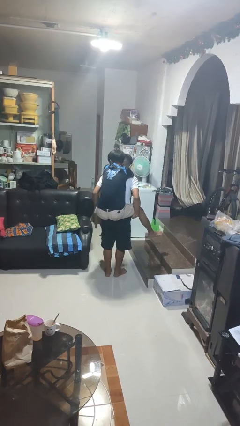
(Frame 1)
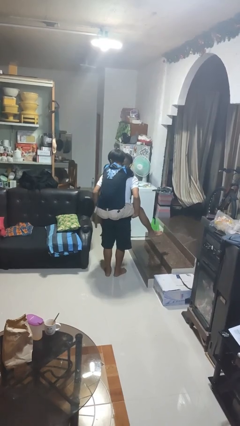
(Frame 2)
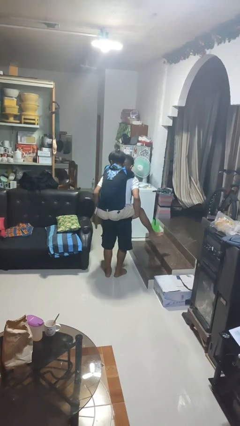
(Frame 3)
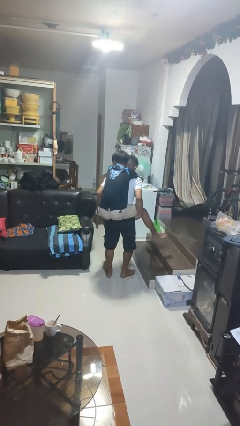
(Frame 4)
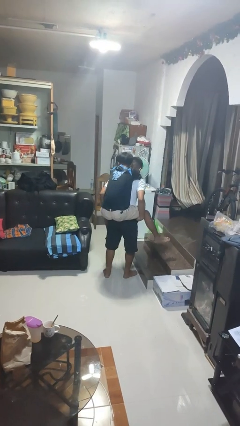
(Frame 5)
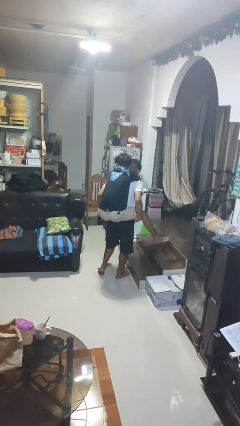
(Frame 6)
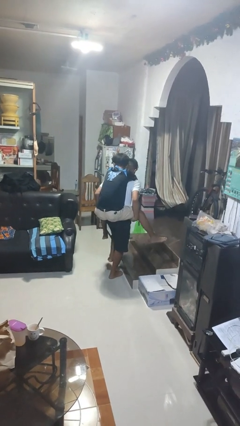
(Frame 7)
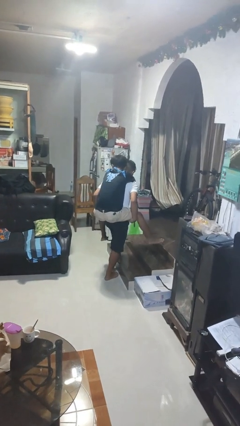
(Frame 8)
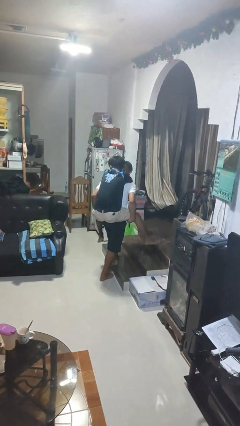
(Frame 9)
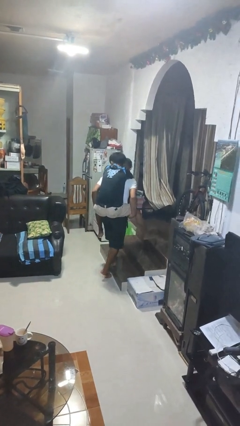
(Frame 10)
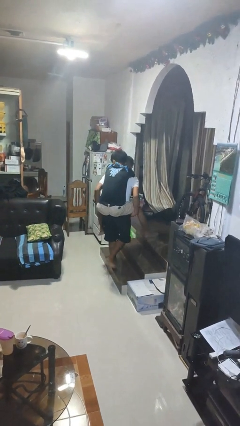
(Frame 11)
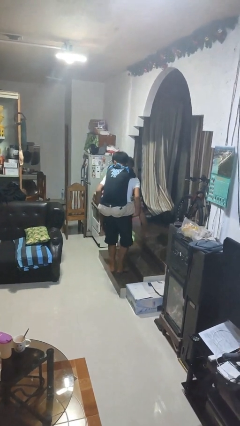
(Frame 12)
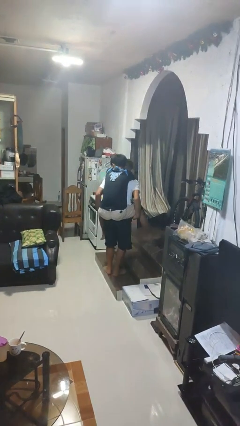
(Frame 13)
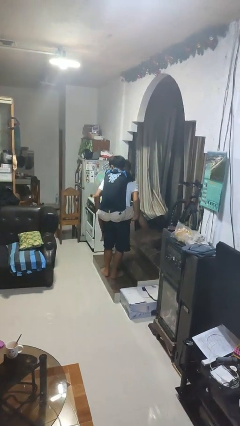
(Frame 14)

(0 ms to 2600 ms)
person carries person on back

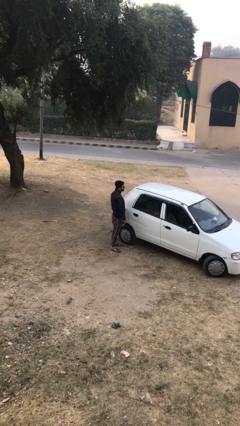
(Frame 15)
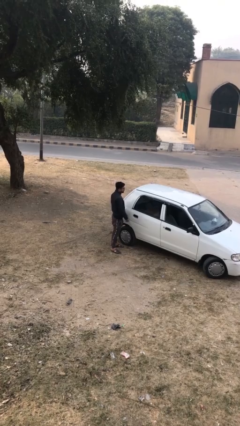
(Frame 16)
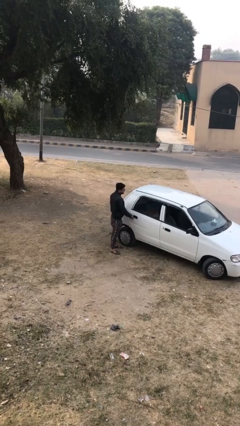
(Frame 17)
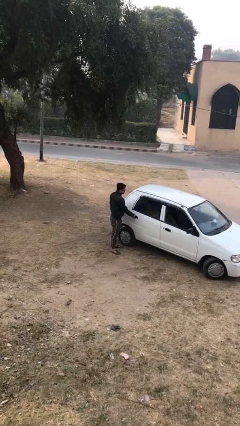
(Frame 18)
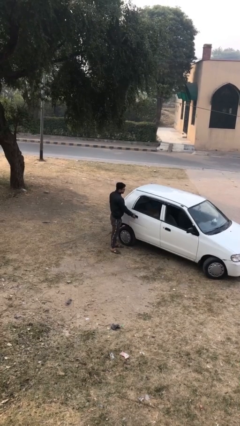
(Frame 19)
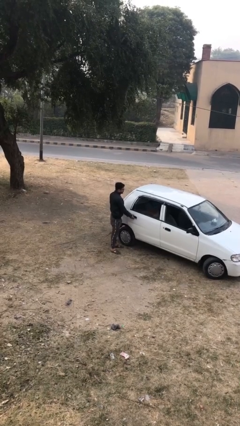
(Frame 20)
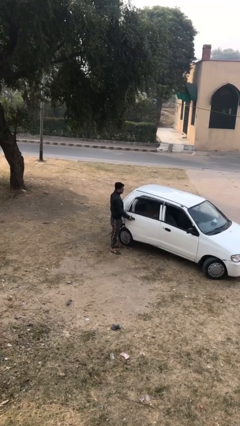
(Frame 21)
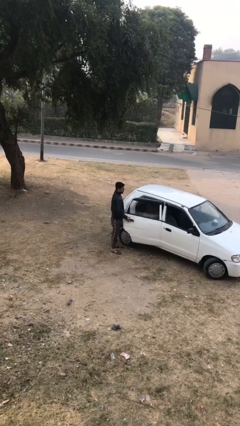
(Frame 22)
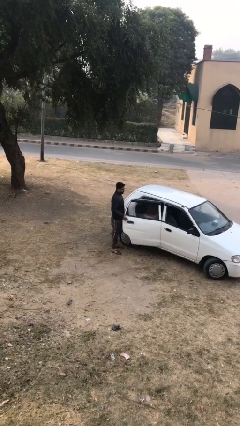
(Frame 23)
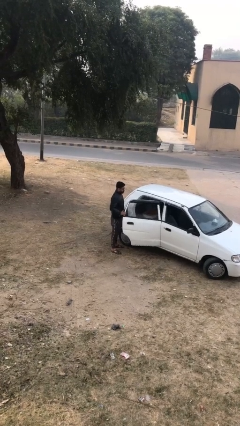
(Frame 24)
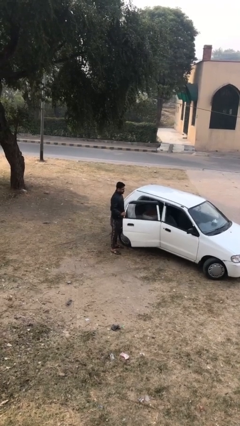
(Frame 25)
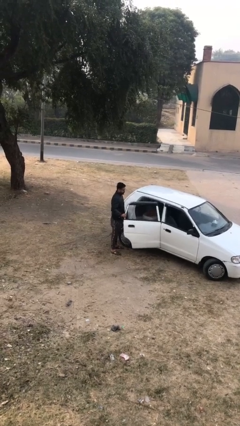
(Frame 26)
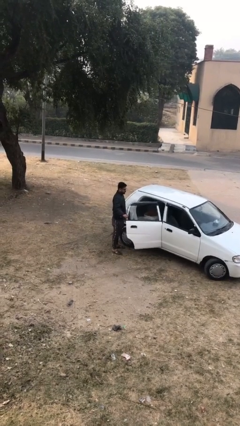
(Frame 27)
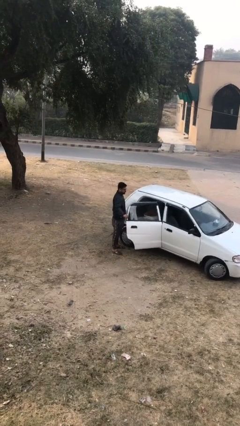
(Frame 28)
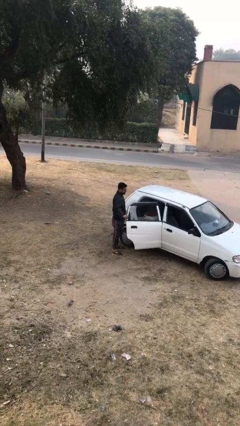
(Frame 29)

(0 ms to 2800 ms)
person opens car door

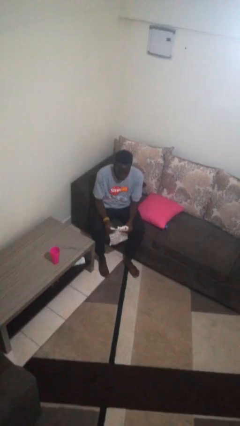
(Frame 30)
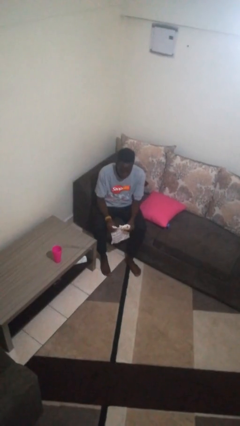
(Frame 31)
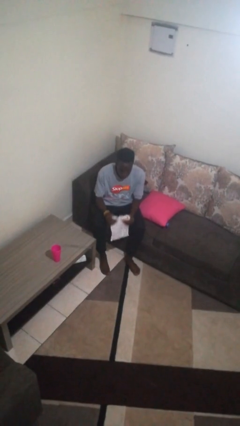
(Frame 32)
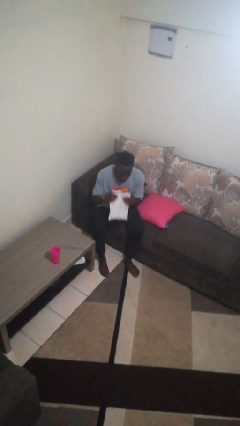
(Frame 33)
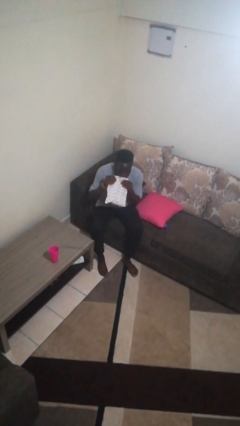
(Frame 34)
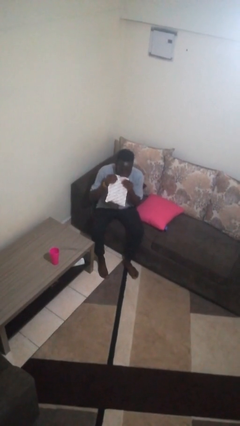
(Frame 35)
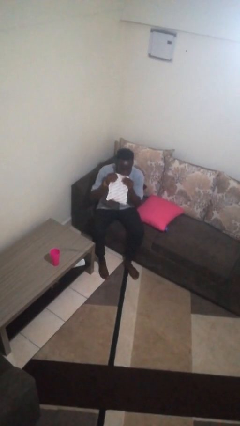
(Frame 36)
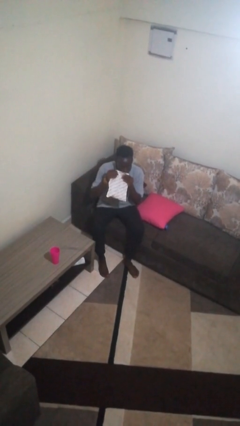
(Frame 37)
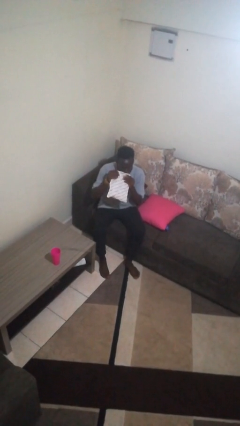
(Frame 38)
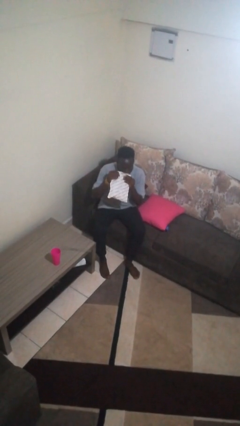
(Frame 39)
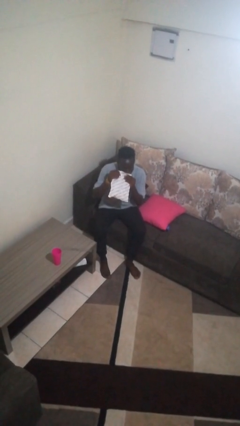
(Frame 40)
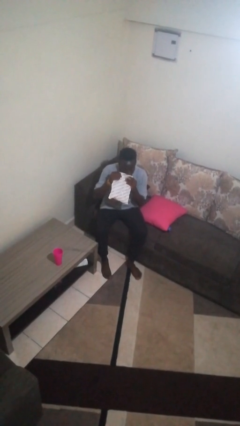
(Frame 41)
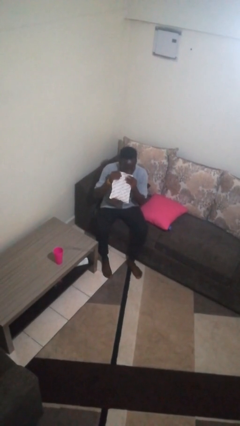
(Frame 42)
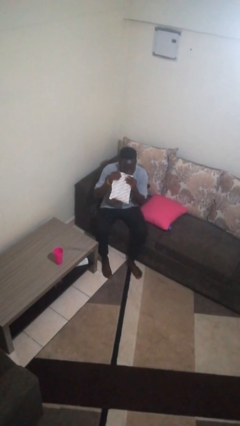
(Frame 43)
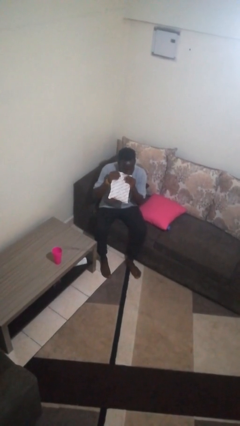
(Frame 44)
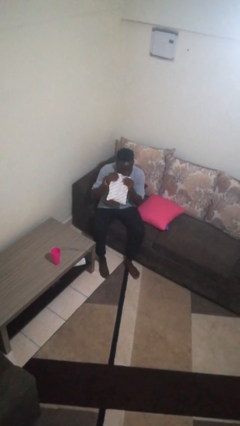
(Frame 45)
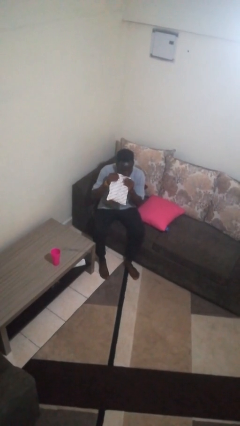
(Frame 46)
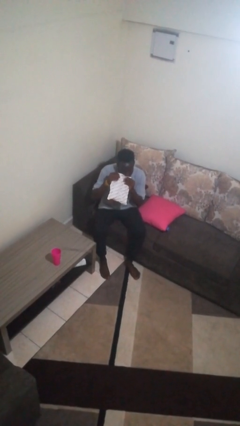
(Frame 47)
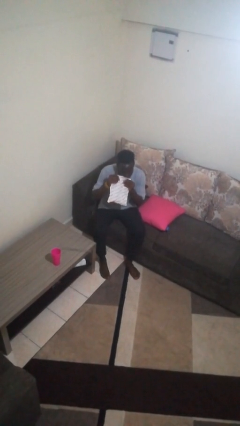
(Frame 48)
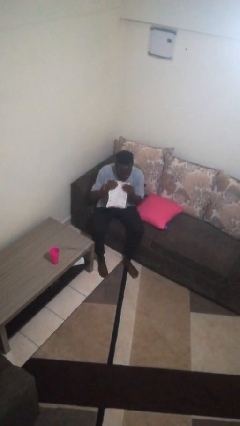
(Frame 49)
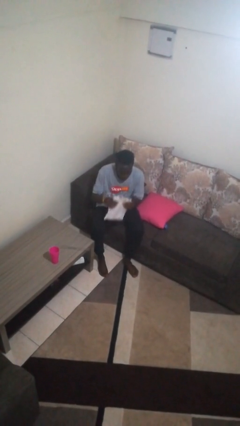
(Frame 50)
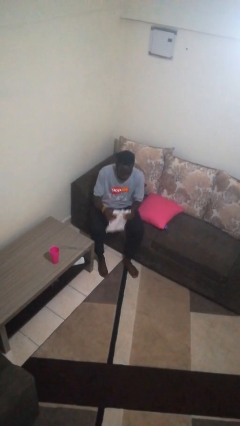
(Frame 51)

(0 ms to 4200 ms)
person eats snack from bag

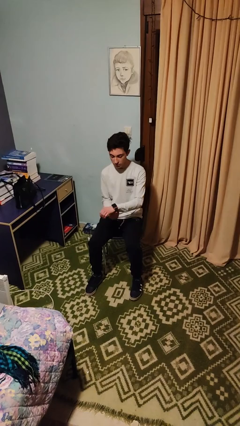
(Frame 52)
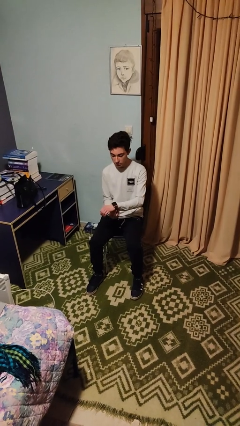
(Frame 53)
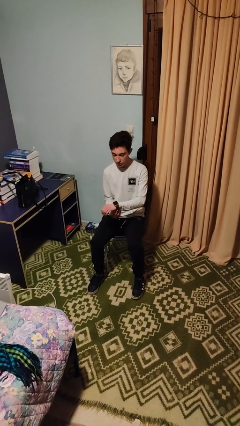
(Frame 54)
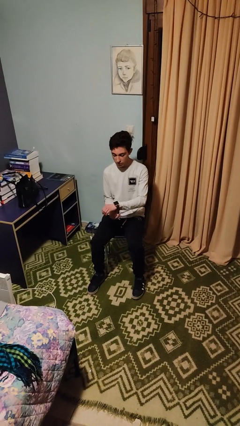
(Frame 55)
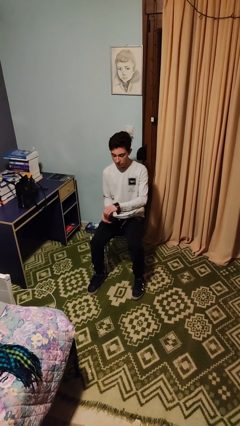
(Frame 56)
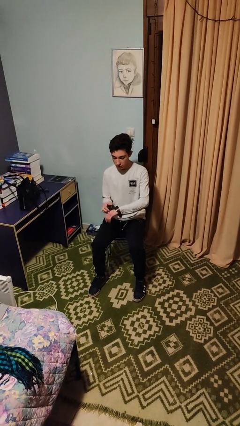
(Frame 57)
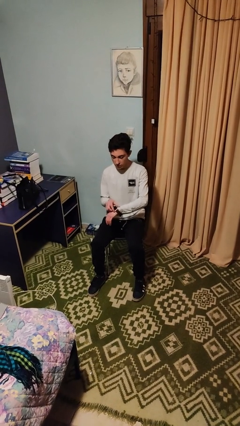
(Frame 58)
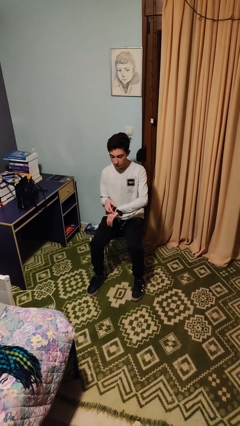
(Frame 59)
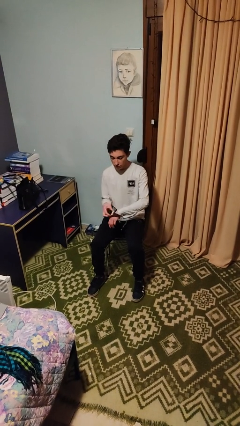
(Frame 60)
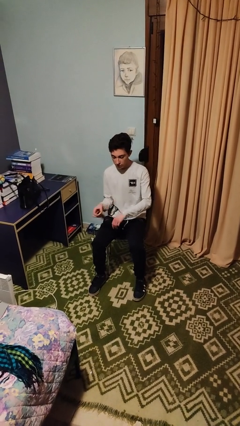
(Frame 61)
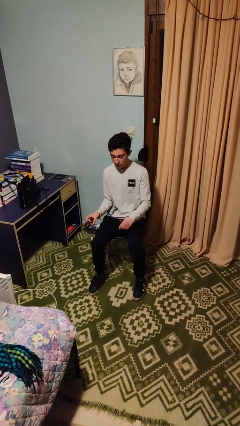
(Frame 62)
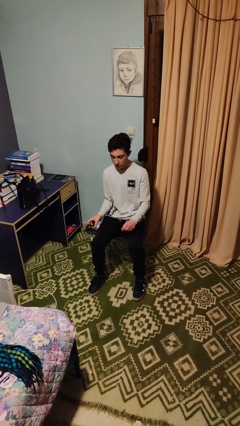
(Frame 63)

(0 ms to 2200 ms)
person takes off wristwatch

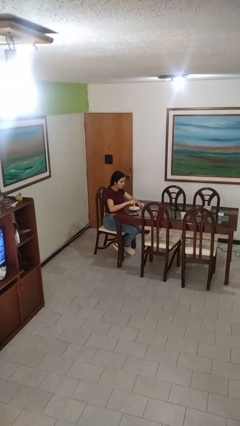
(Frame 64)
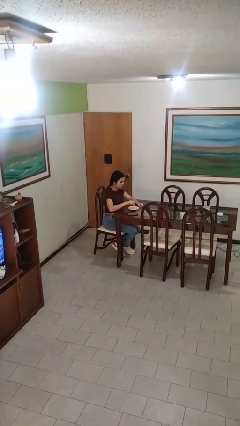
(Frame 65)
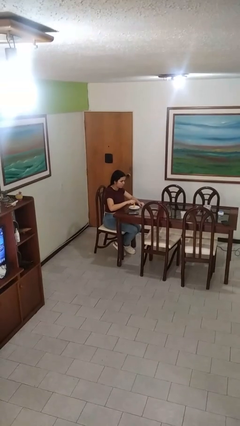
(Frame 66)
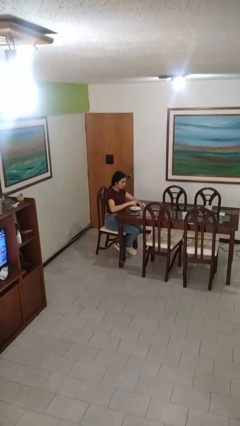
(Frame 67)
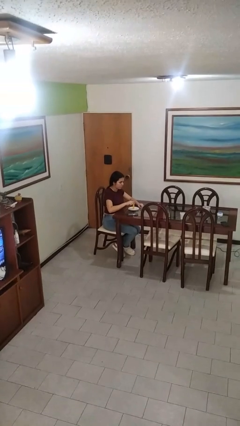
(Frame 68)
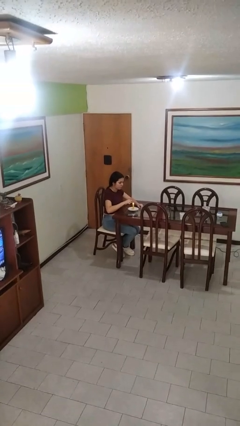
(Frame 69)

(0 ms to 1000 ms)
person lights candle

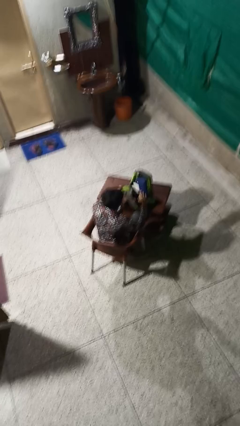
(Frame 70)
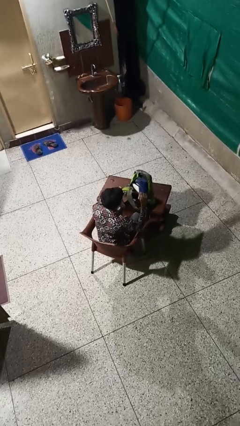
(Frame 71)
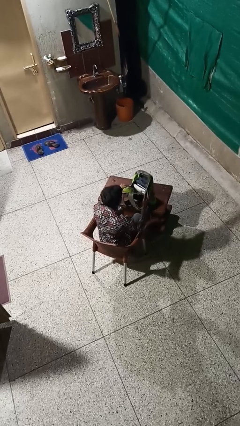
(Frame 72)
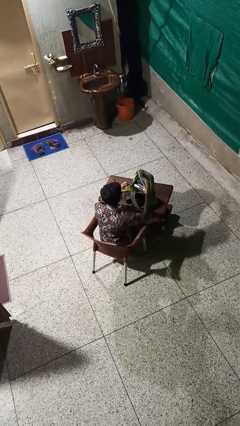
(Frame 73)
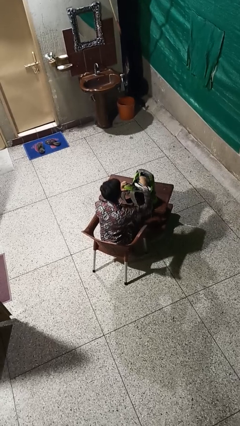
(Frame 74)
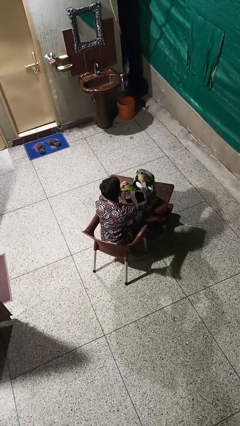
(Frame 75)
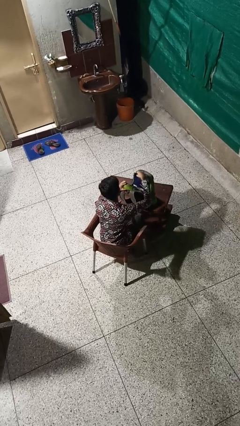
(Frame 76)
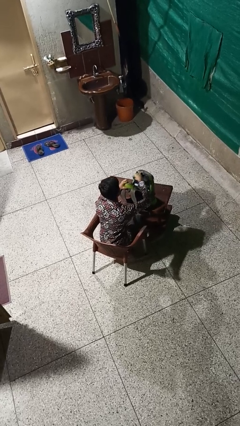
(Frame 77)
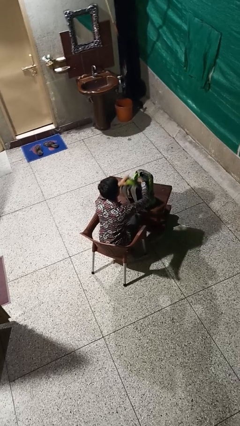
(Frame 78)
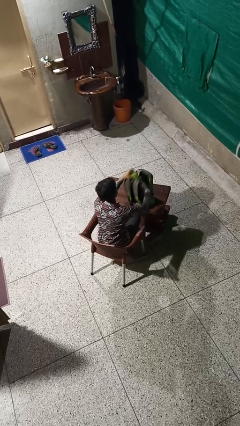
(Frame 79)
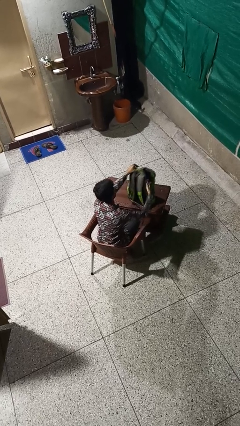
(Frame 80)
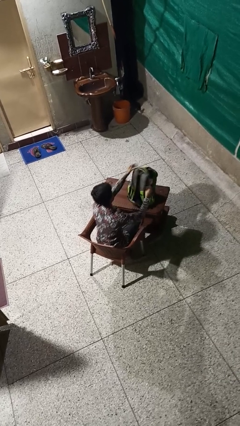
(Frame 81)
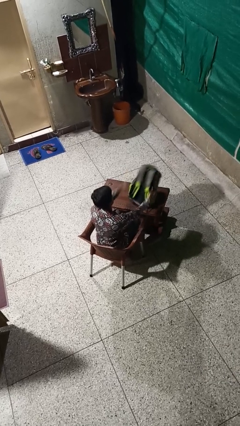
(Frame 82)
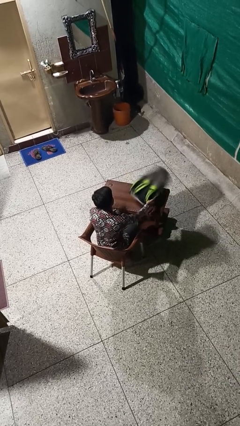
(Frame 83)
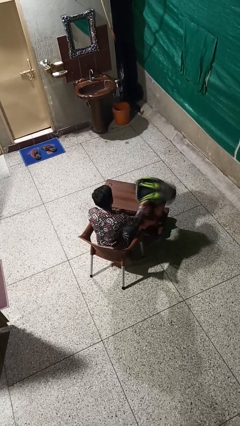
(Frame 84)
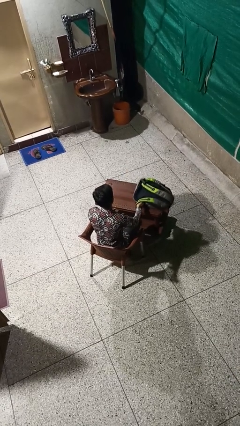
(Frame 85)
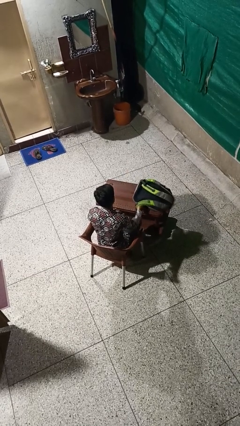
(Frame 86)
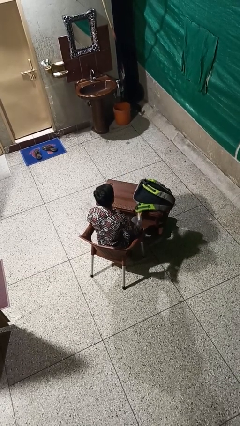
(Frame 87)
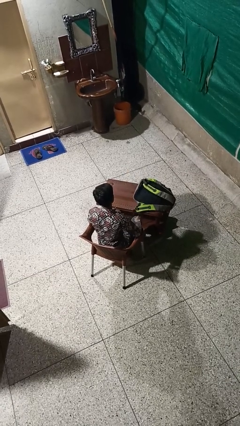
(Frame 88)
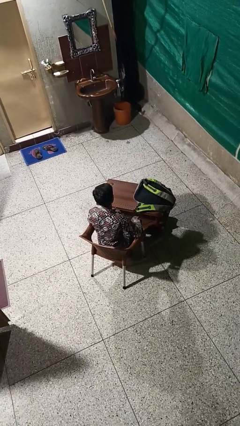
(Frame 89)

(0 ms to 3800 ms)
person puts object into backpack

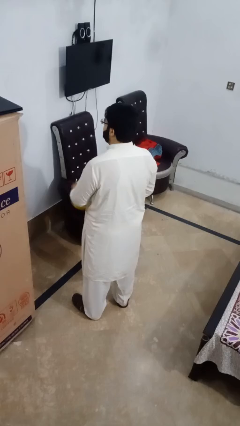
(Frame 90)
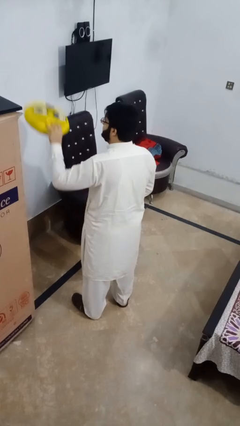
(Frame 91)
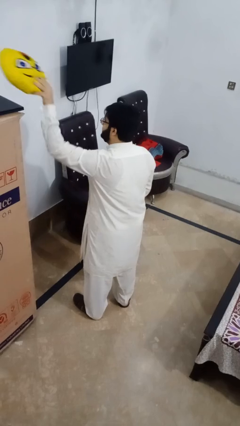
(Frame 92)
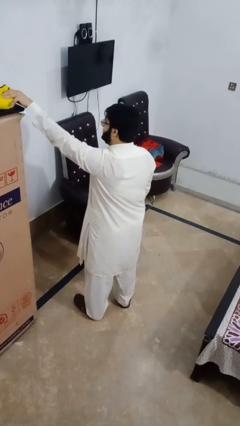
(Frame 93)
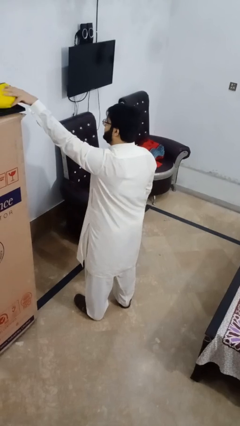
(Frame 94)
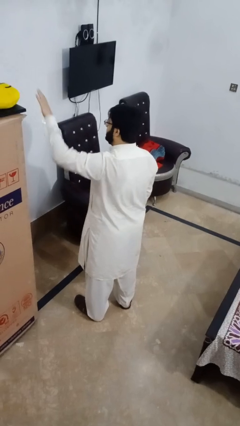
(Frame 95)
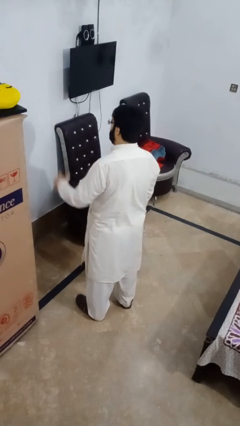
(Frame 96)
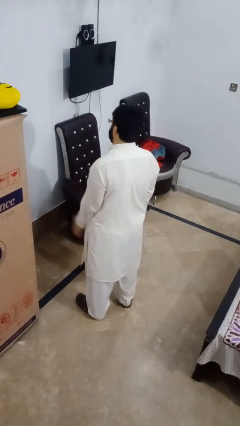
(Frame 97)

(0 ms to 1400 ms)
person puts down object on shelf
